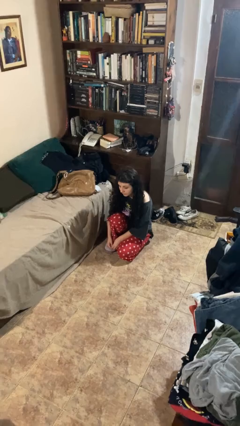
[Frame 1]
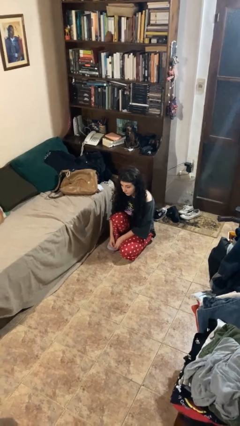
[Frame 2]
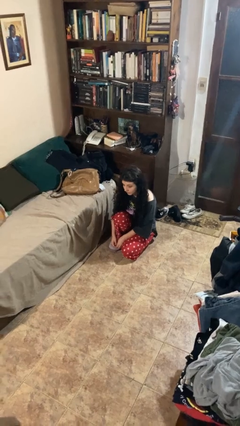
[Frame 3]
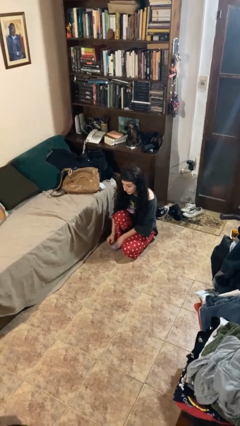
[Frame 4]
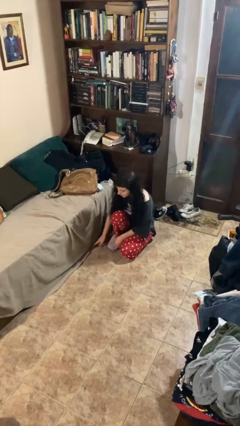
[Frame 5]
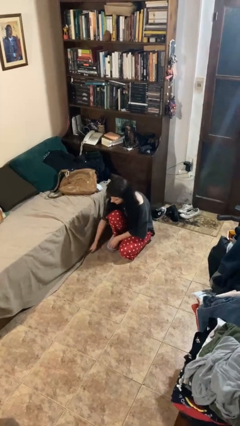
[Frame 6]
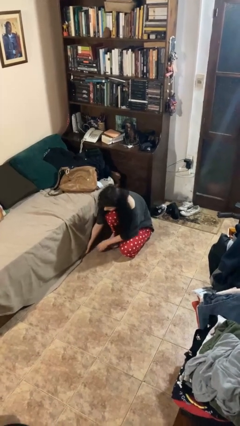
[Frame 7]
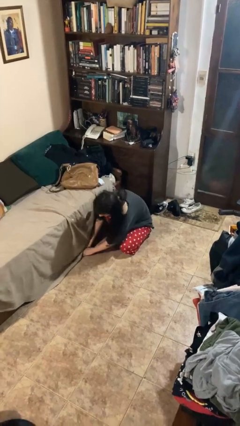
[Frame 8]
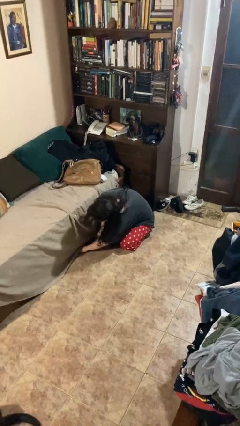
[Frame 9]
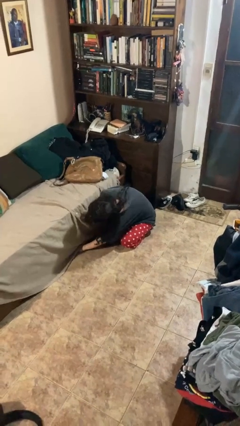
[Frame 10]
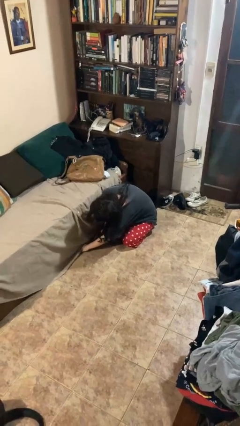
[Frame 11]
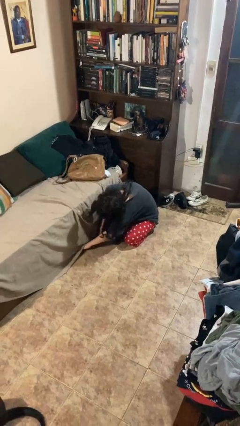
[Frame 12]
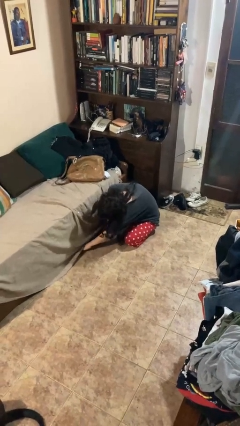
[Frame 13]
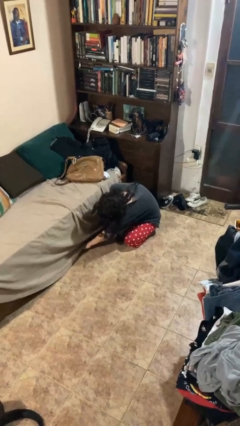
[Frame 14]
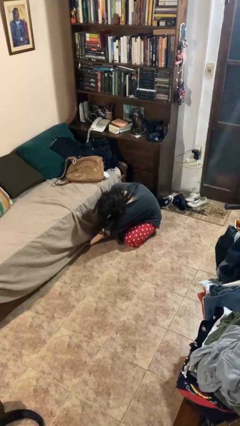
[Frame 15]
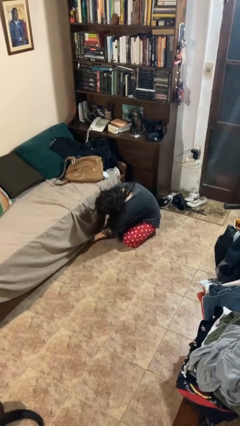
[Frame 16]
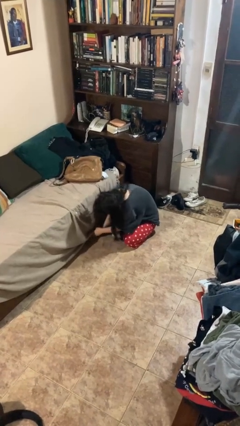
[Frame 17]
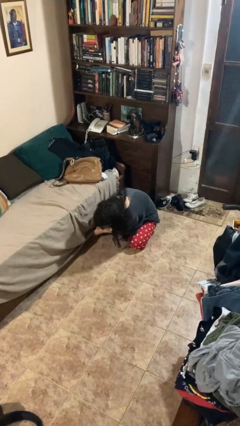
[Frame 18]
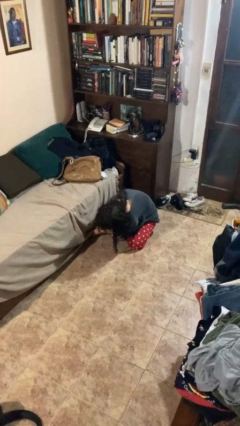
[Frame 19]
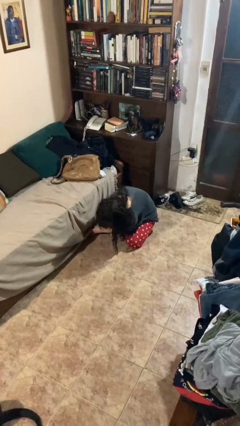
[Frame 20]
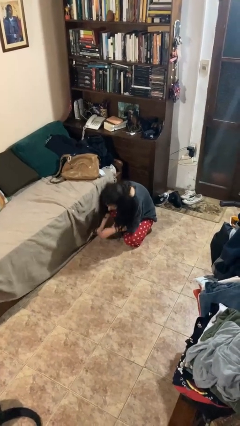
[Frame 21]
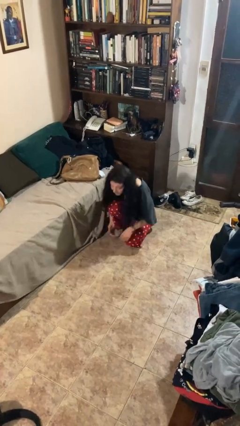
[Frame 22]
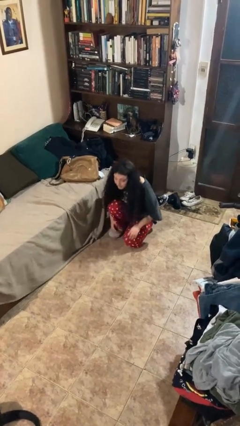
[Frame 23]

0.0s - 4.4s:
person searches under couch

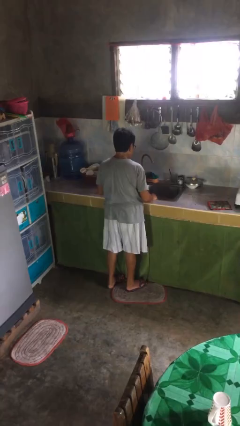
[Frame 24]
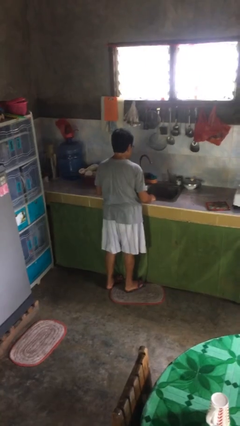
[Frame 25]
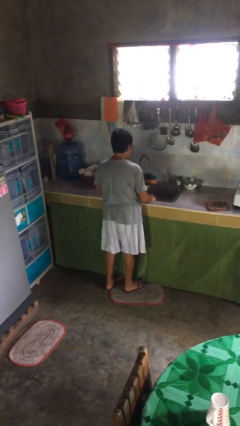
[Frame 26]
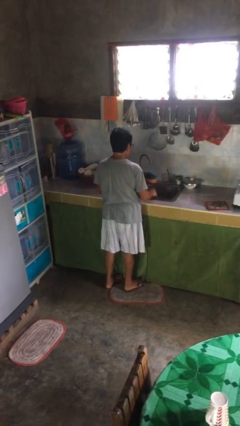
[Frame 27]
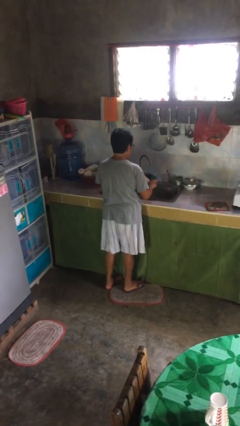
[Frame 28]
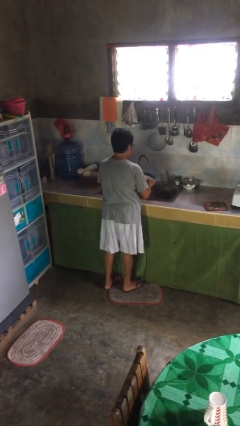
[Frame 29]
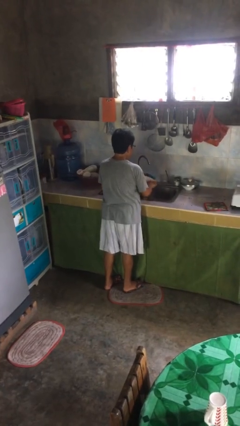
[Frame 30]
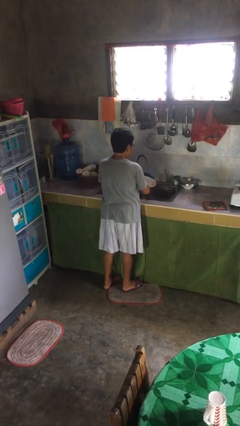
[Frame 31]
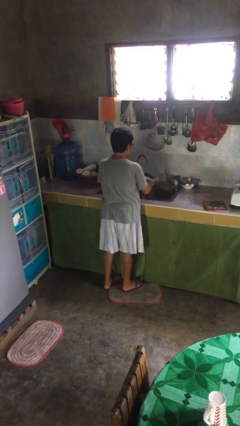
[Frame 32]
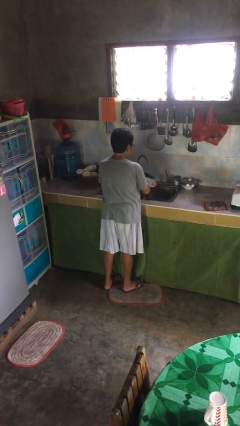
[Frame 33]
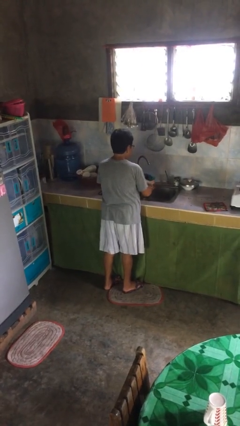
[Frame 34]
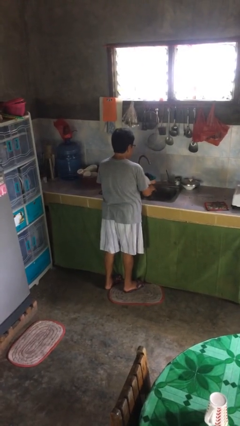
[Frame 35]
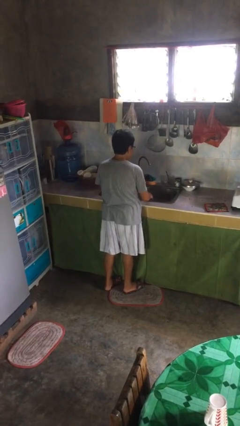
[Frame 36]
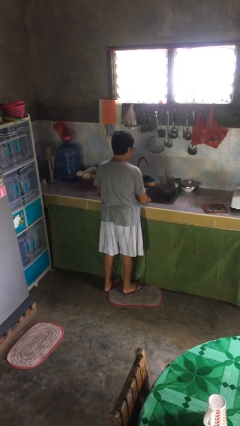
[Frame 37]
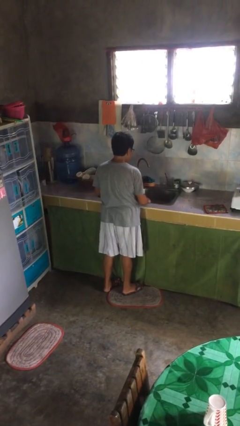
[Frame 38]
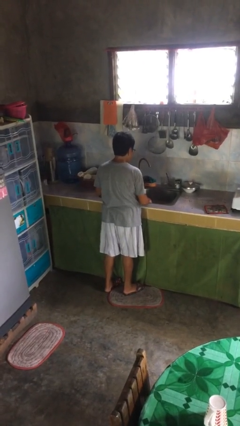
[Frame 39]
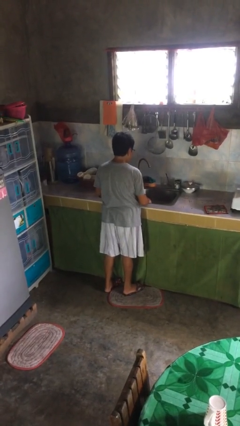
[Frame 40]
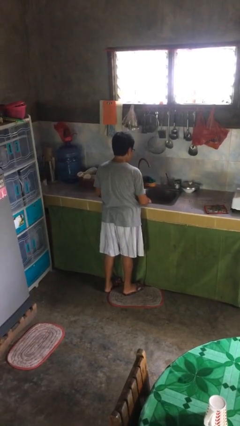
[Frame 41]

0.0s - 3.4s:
person washes dish

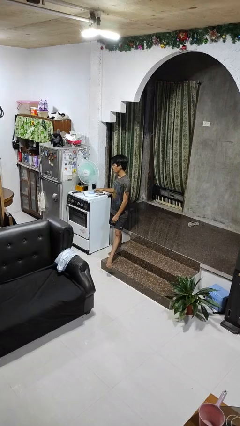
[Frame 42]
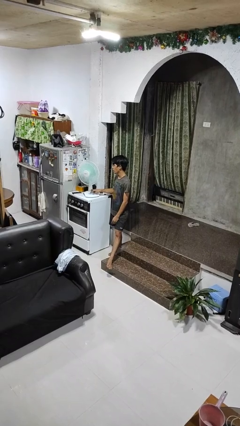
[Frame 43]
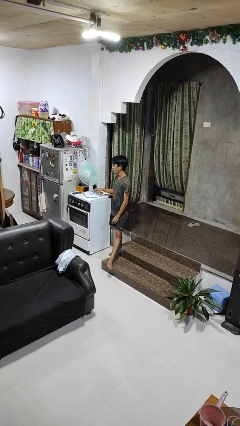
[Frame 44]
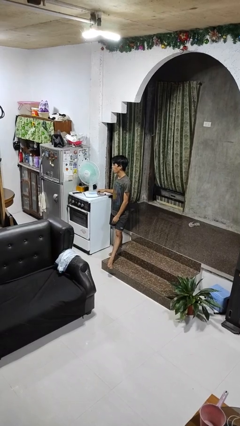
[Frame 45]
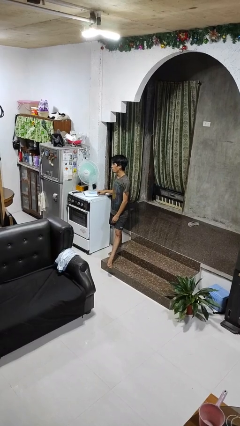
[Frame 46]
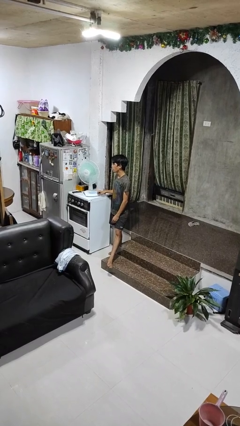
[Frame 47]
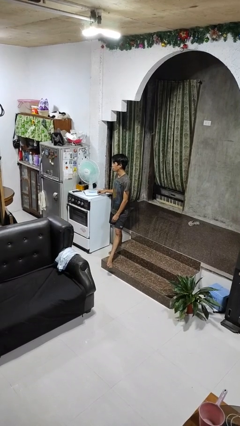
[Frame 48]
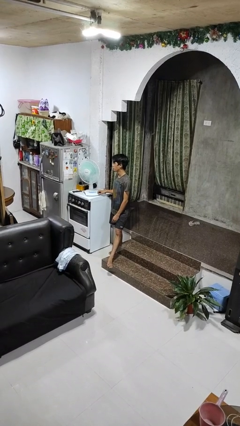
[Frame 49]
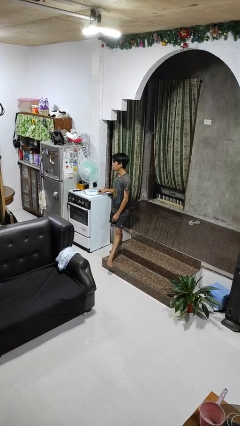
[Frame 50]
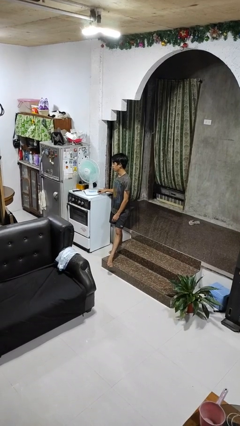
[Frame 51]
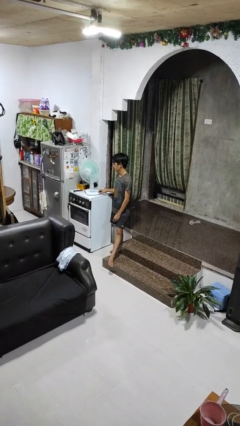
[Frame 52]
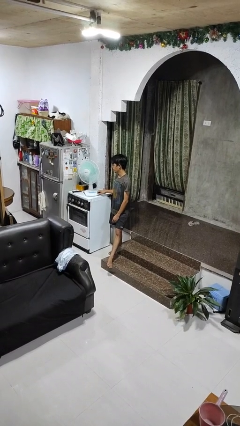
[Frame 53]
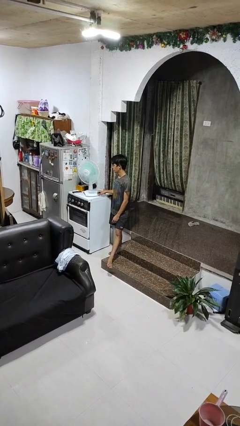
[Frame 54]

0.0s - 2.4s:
person turns off fan

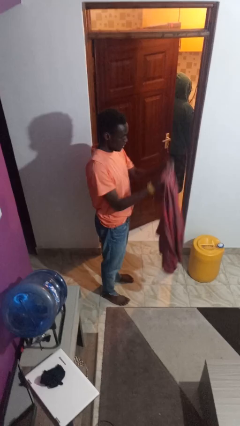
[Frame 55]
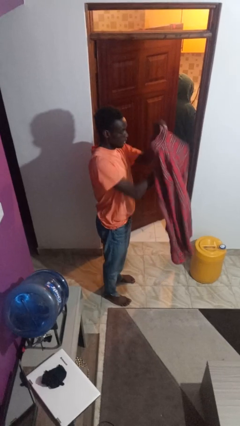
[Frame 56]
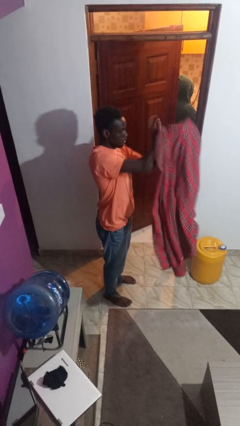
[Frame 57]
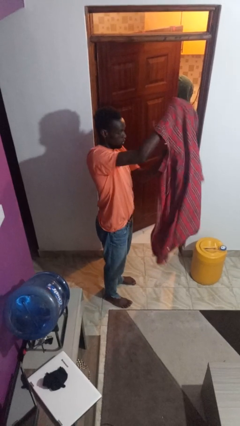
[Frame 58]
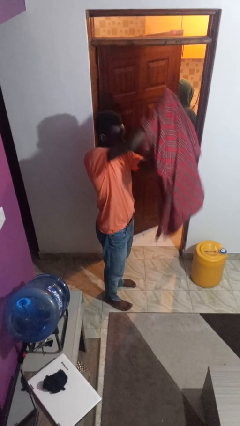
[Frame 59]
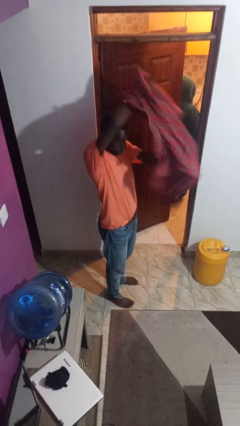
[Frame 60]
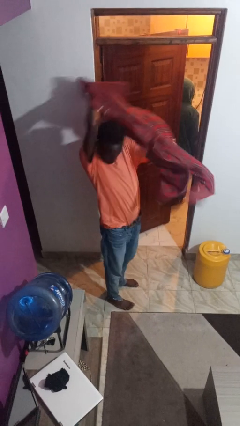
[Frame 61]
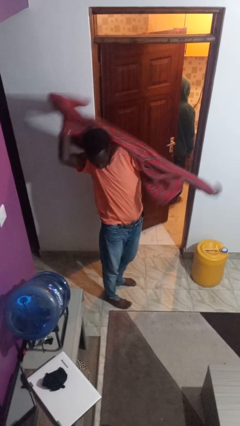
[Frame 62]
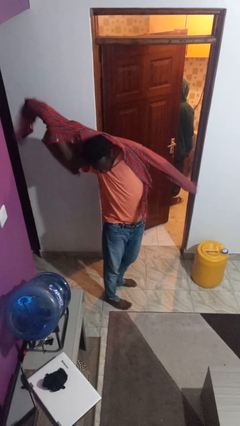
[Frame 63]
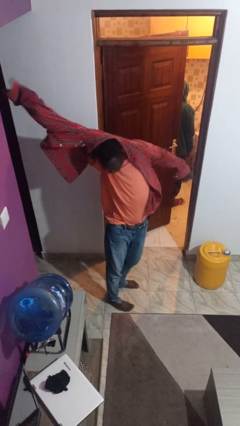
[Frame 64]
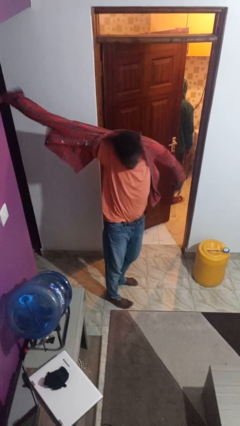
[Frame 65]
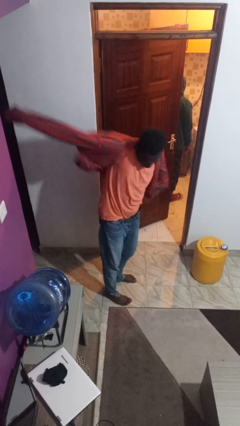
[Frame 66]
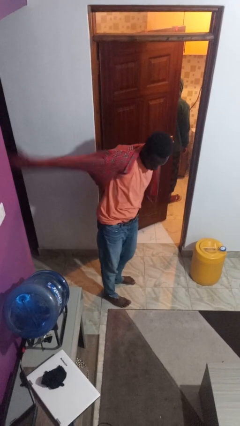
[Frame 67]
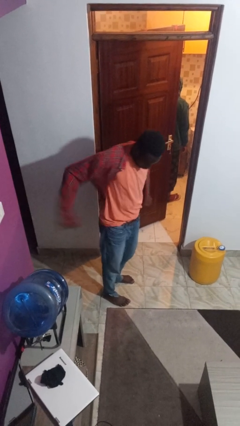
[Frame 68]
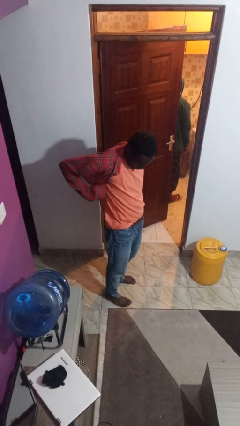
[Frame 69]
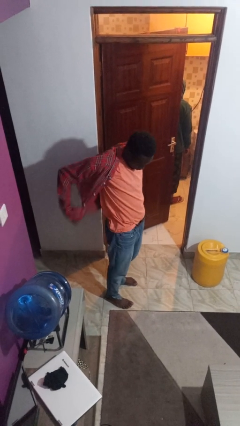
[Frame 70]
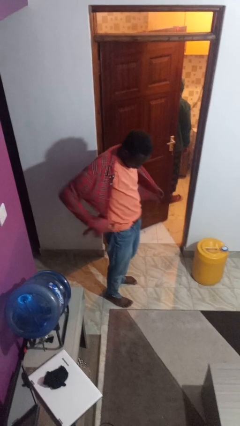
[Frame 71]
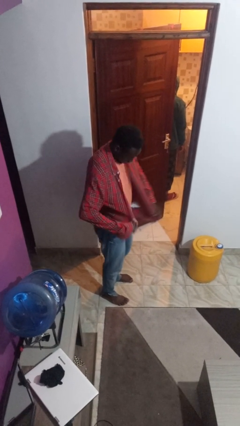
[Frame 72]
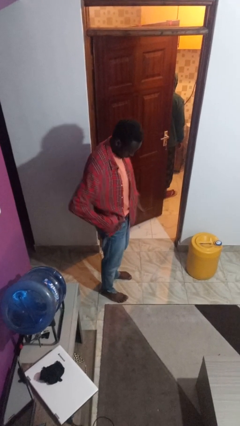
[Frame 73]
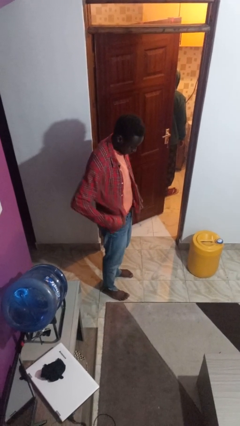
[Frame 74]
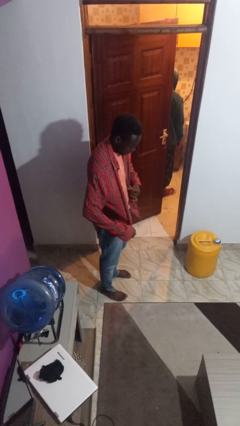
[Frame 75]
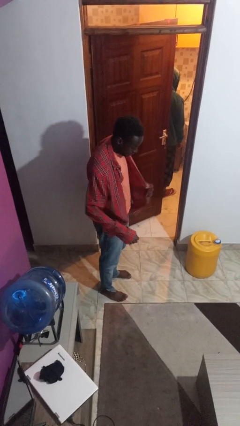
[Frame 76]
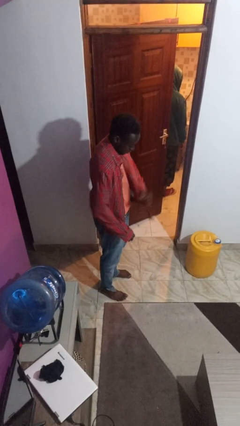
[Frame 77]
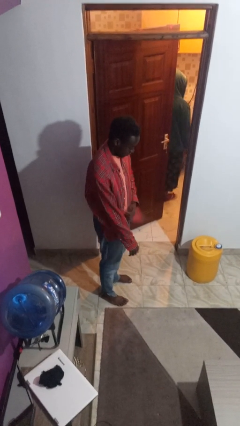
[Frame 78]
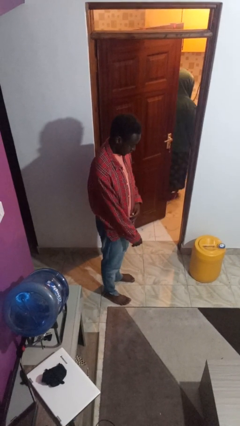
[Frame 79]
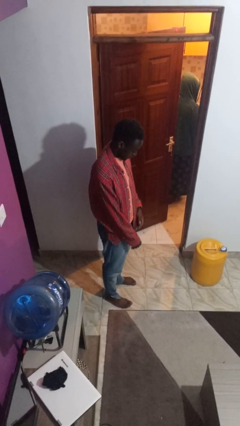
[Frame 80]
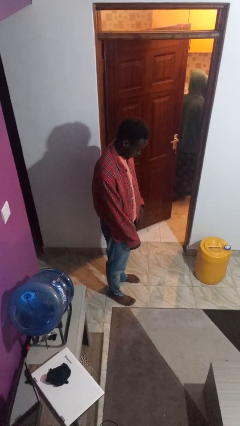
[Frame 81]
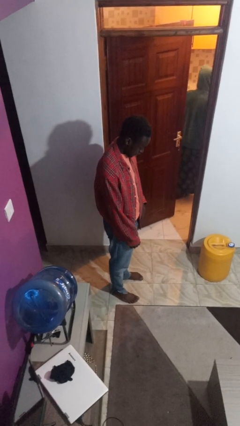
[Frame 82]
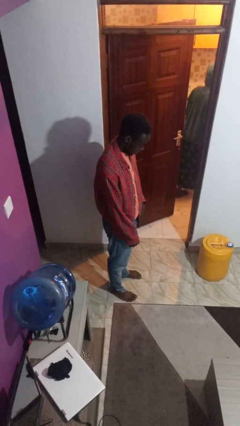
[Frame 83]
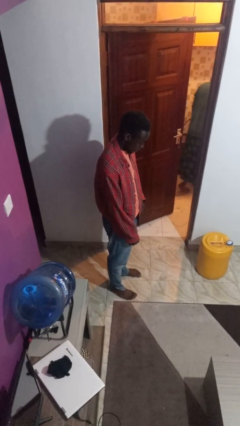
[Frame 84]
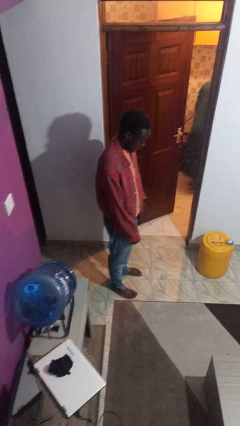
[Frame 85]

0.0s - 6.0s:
person puts on shirt

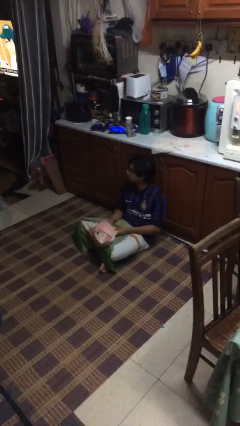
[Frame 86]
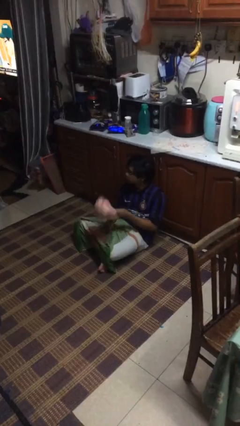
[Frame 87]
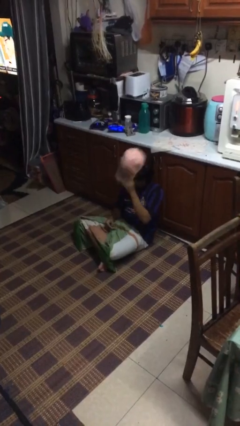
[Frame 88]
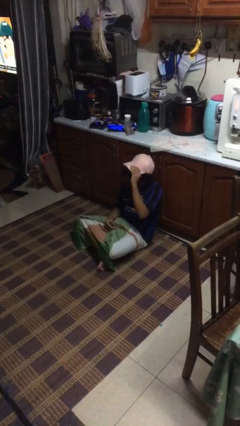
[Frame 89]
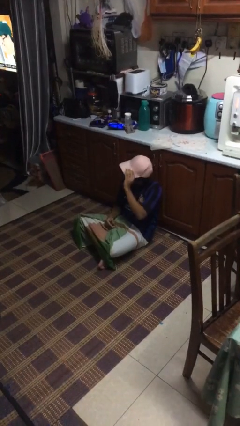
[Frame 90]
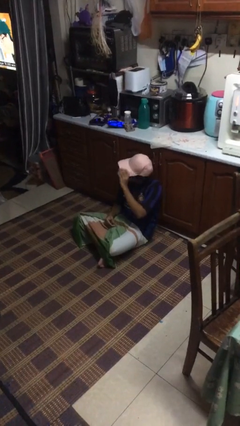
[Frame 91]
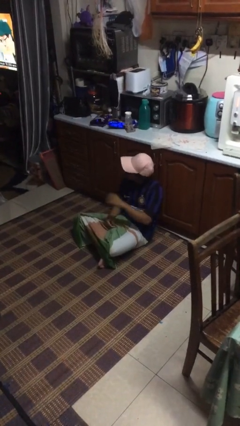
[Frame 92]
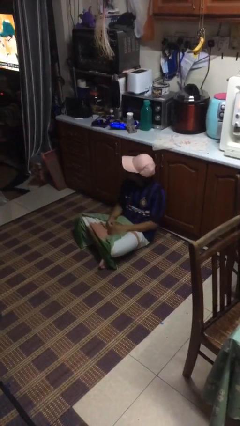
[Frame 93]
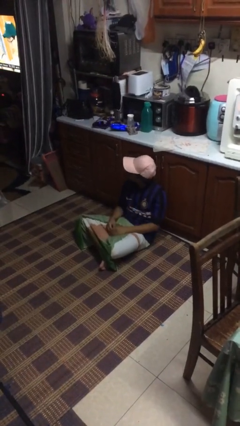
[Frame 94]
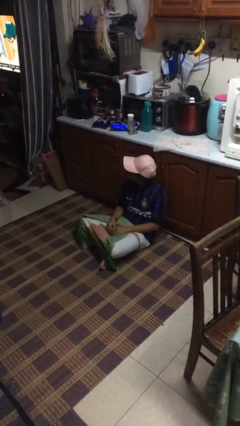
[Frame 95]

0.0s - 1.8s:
person puts on hat
